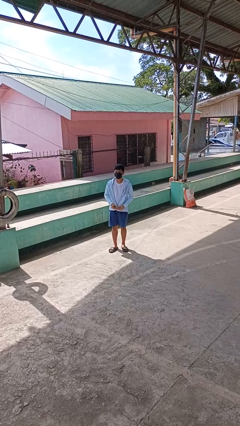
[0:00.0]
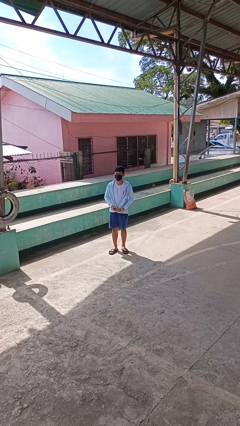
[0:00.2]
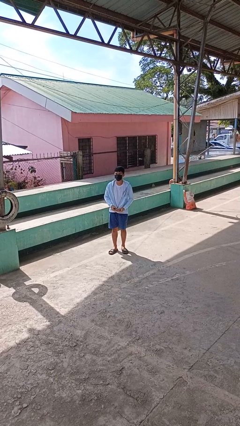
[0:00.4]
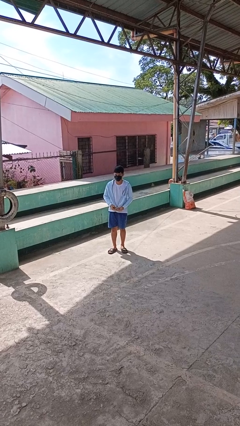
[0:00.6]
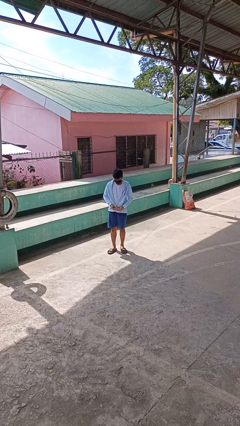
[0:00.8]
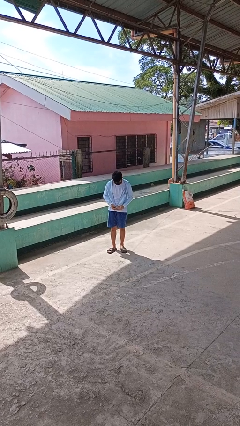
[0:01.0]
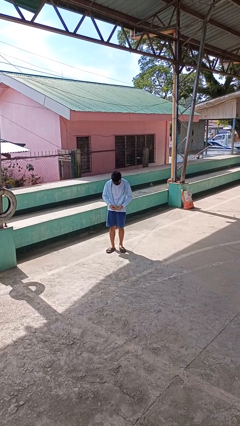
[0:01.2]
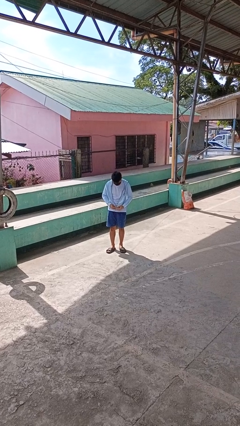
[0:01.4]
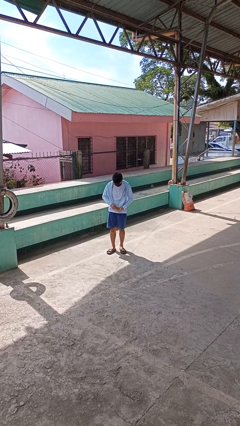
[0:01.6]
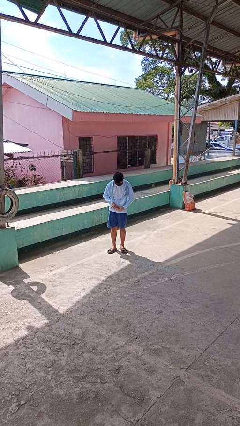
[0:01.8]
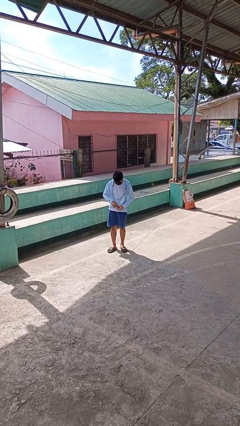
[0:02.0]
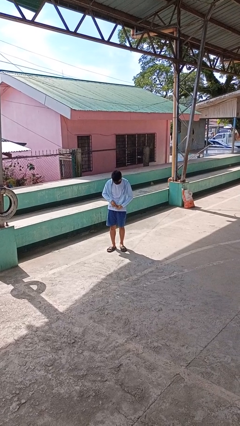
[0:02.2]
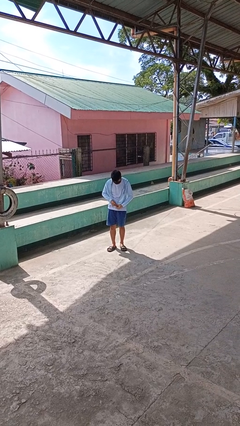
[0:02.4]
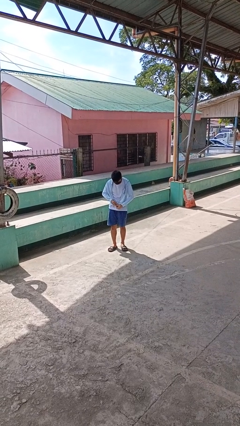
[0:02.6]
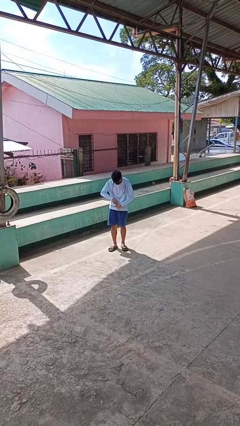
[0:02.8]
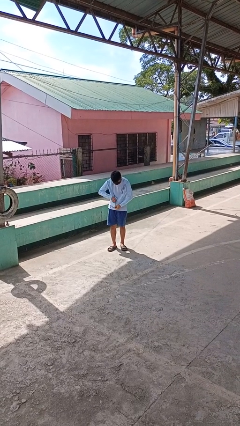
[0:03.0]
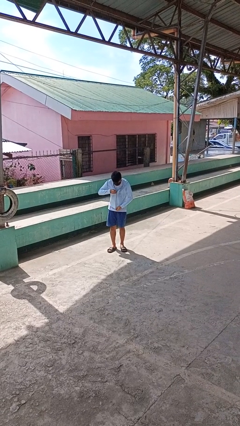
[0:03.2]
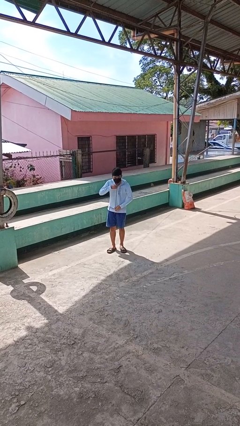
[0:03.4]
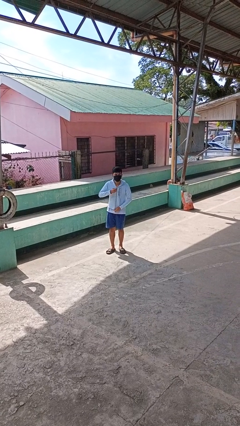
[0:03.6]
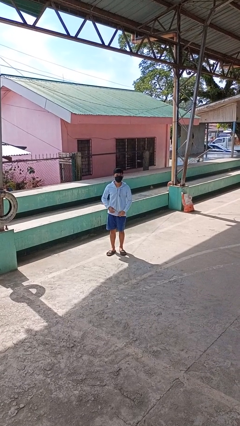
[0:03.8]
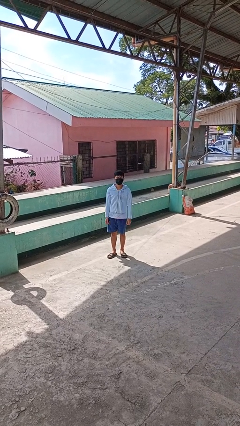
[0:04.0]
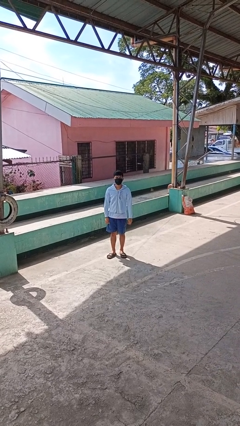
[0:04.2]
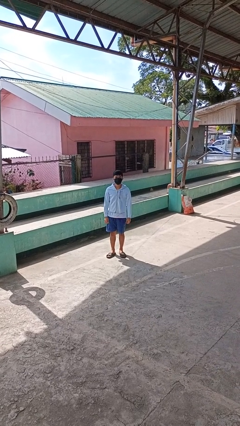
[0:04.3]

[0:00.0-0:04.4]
person zips up jacket

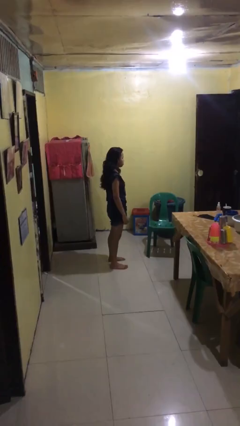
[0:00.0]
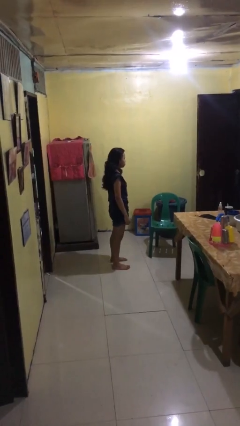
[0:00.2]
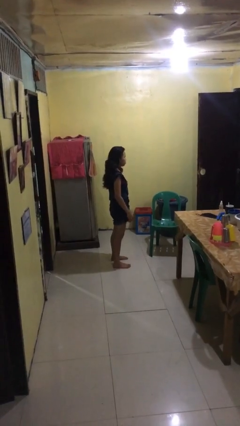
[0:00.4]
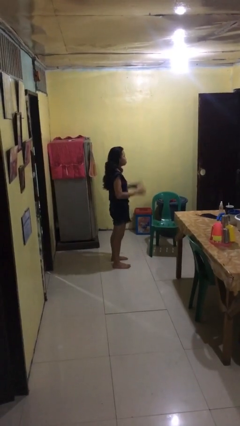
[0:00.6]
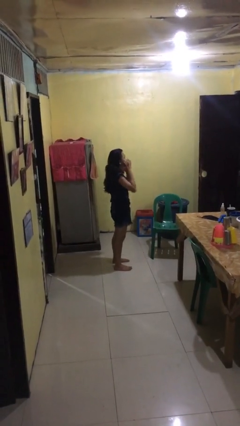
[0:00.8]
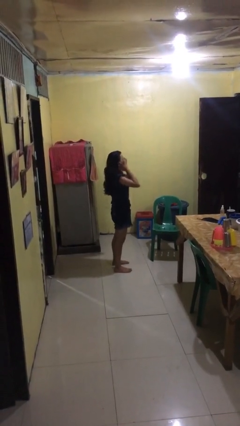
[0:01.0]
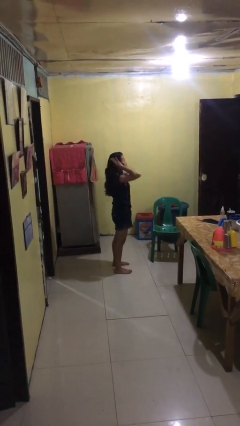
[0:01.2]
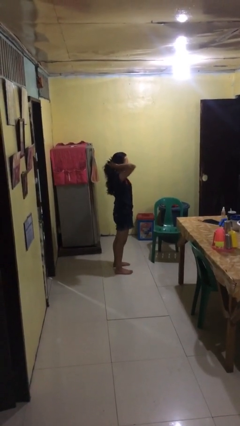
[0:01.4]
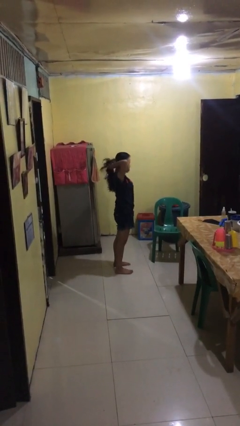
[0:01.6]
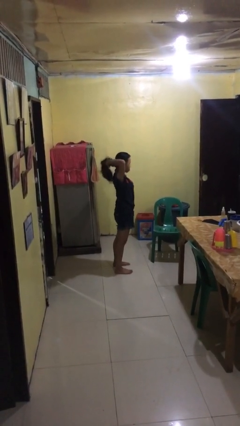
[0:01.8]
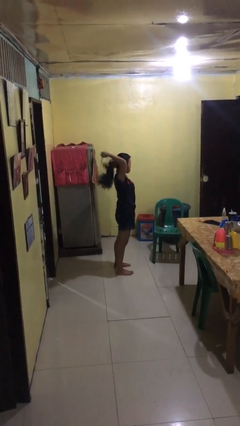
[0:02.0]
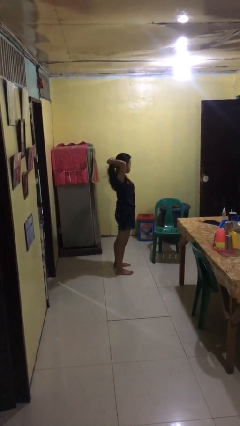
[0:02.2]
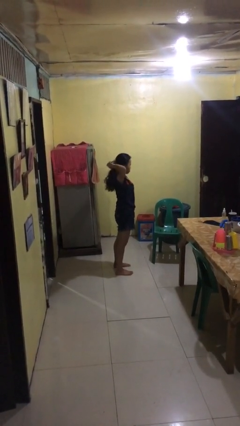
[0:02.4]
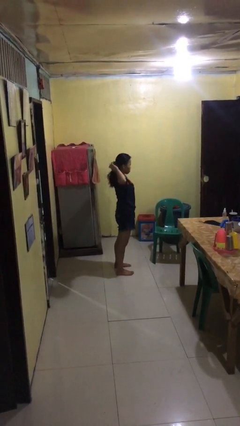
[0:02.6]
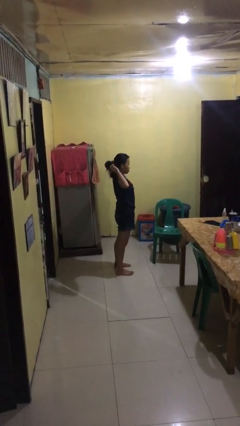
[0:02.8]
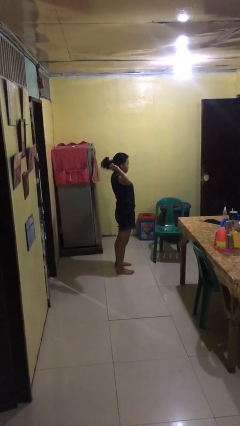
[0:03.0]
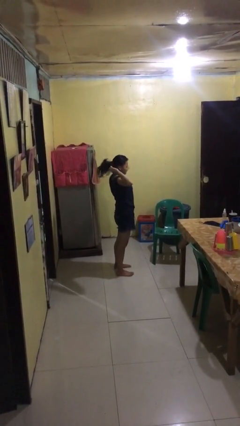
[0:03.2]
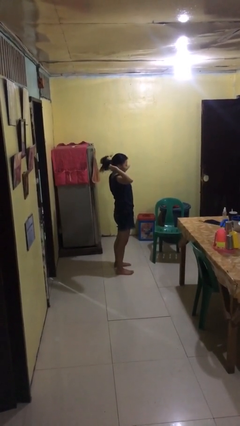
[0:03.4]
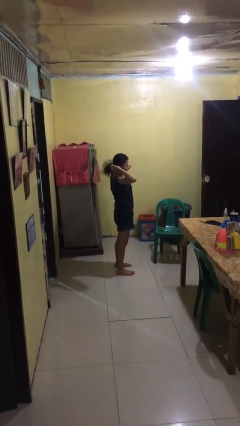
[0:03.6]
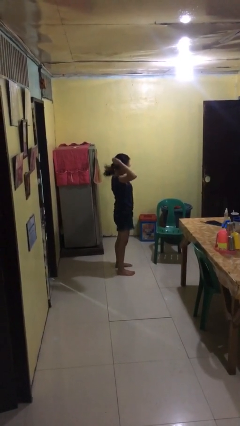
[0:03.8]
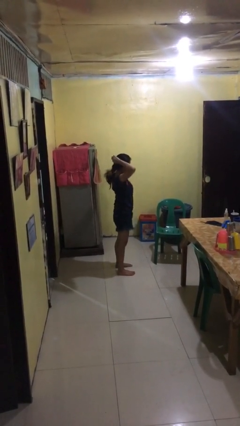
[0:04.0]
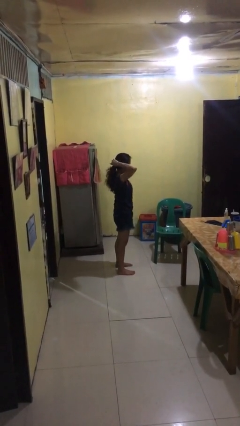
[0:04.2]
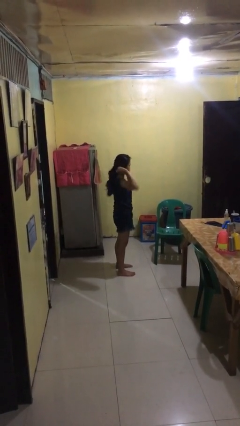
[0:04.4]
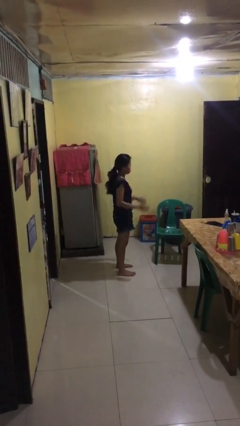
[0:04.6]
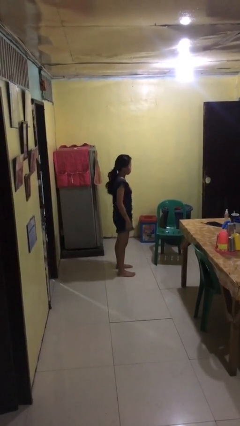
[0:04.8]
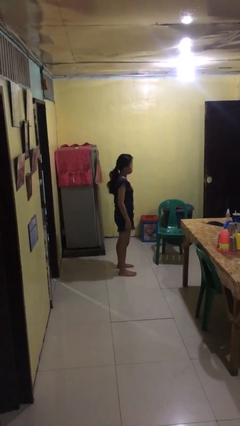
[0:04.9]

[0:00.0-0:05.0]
person puts hair in ponytail

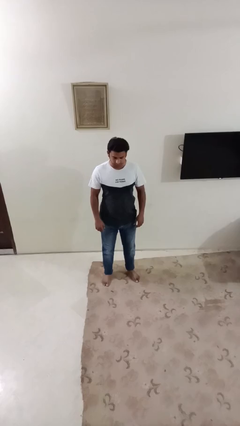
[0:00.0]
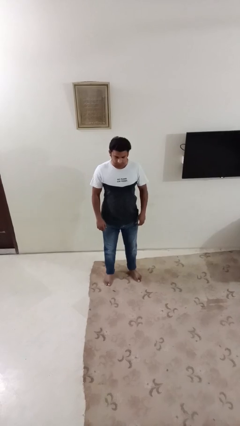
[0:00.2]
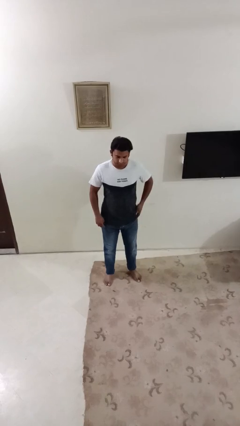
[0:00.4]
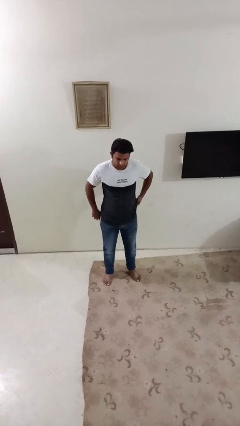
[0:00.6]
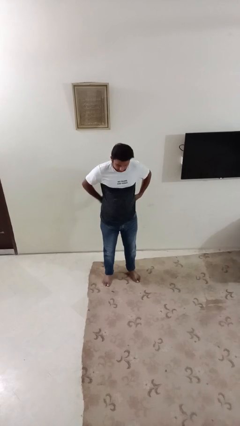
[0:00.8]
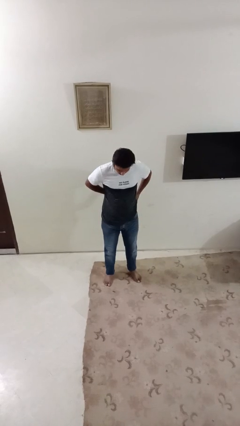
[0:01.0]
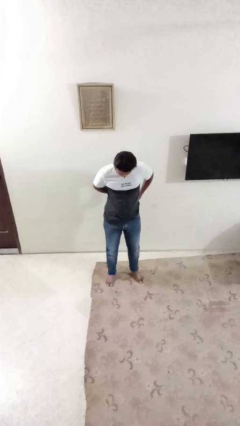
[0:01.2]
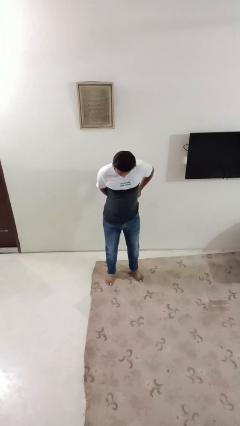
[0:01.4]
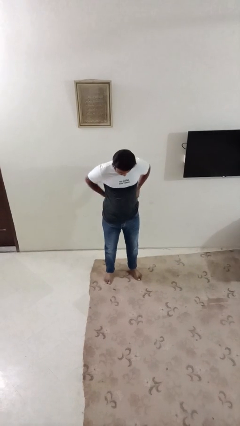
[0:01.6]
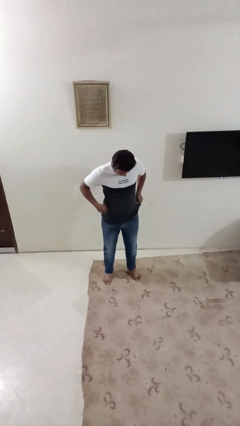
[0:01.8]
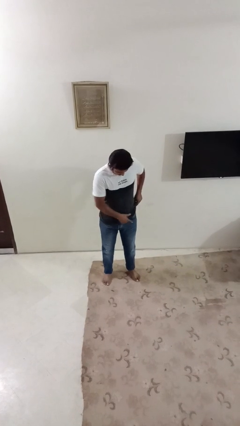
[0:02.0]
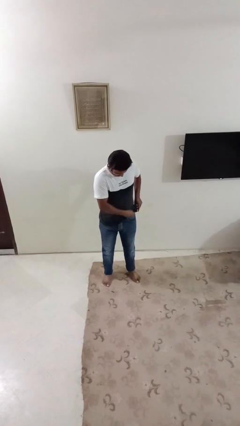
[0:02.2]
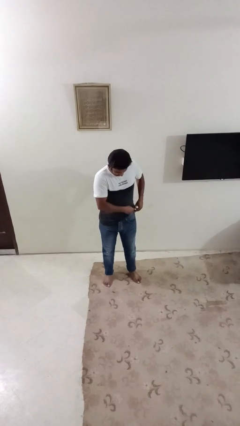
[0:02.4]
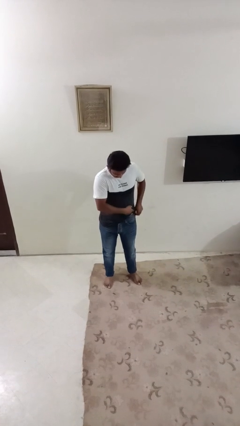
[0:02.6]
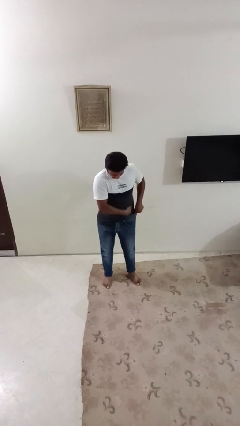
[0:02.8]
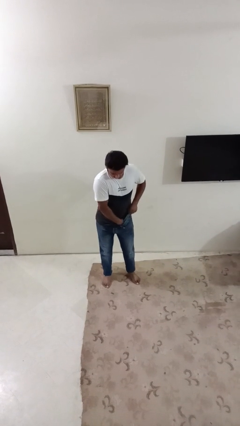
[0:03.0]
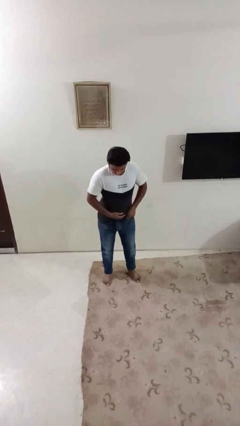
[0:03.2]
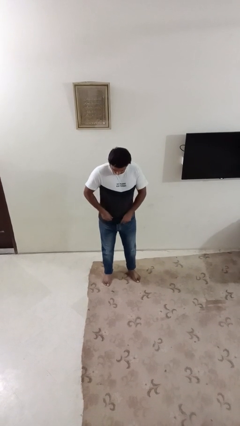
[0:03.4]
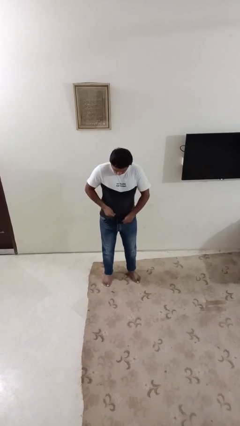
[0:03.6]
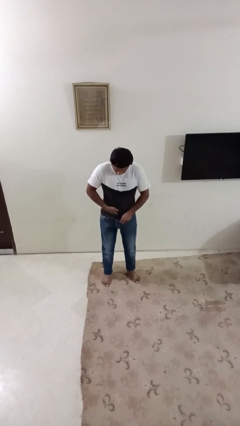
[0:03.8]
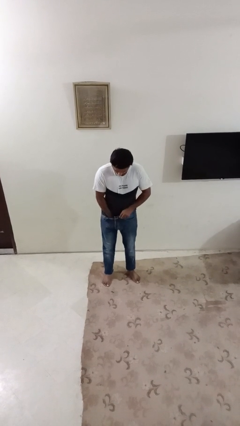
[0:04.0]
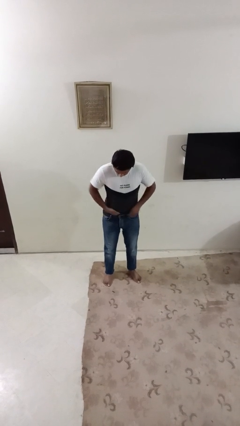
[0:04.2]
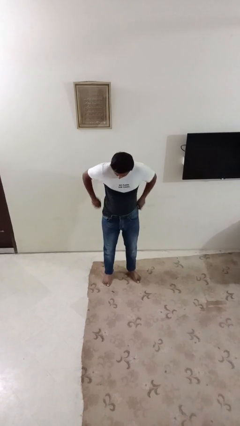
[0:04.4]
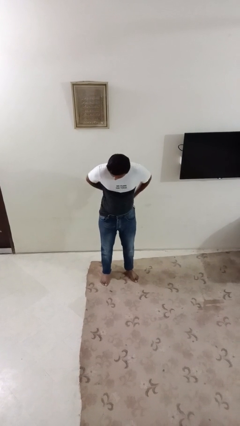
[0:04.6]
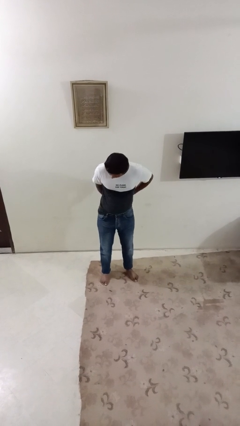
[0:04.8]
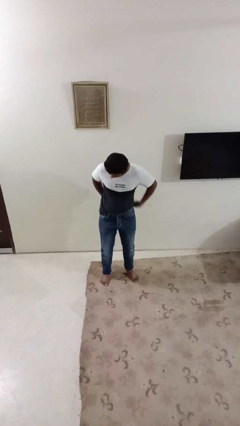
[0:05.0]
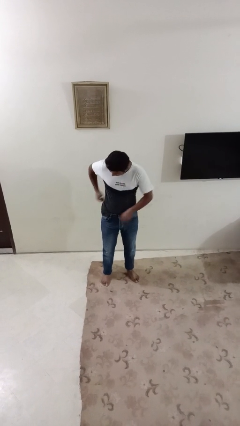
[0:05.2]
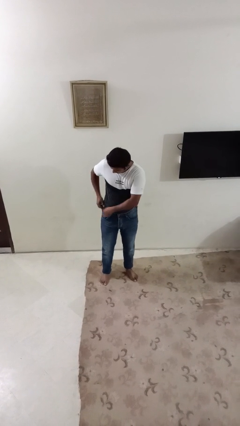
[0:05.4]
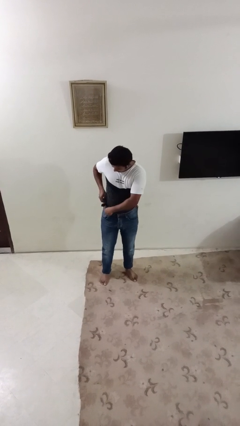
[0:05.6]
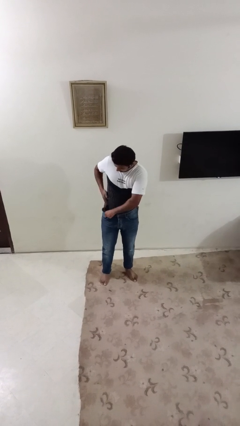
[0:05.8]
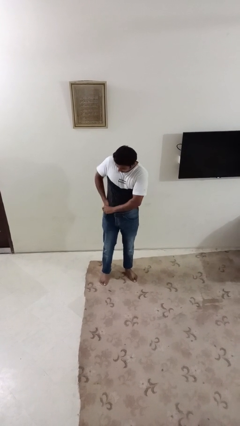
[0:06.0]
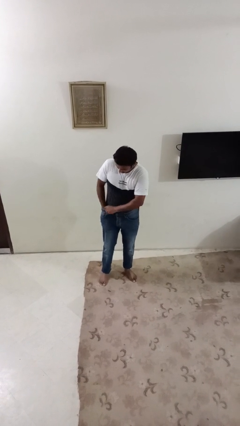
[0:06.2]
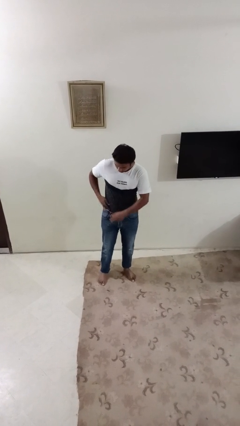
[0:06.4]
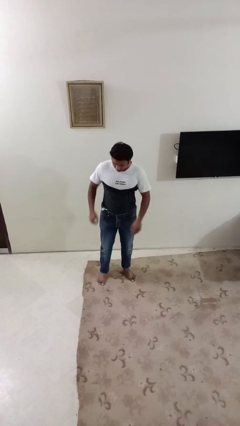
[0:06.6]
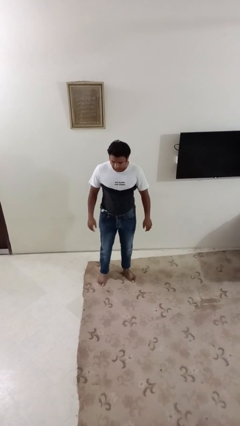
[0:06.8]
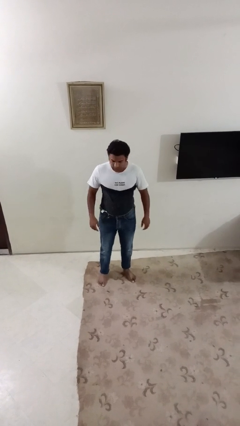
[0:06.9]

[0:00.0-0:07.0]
person tucks in shirt

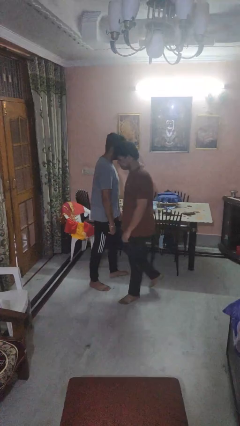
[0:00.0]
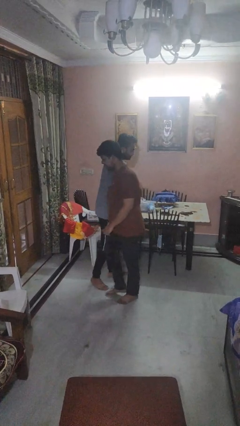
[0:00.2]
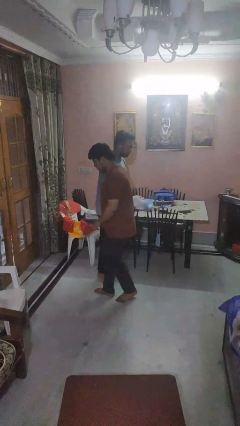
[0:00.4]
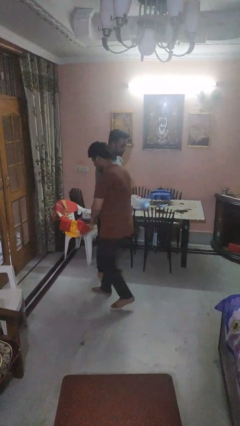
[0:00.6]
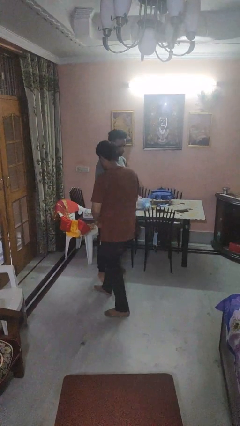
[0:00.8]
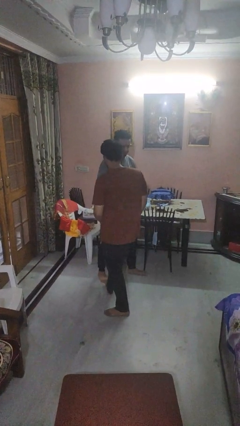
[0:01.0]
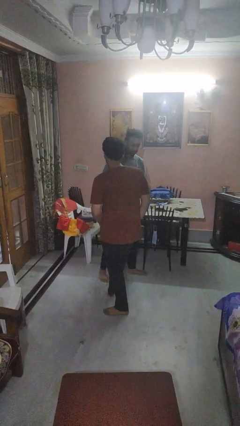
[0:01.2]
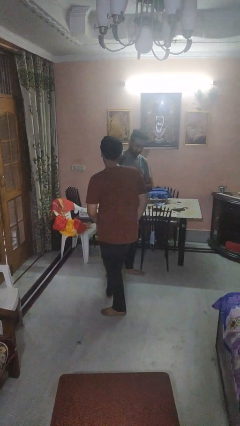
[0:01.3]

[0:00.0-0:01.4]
person bumps into person
